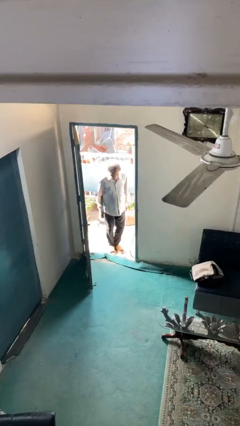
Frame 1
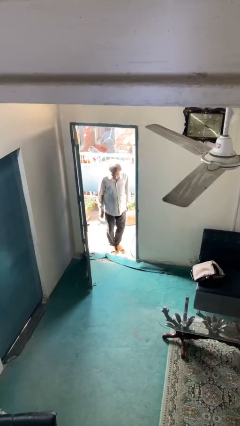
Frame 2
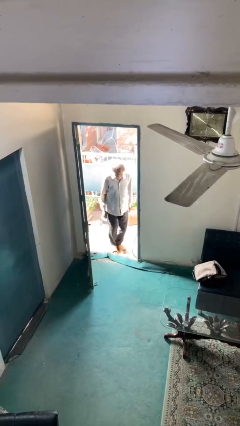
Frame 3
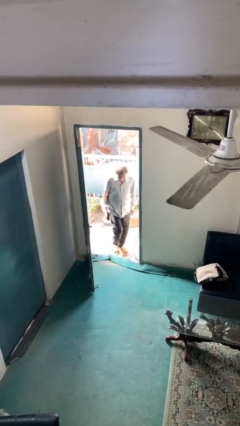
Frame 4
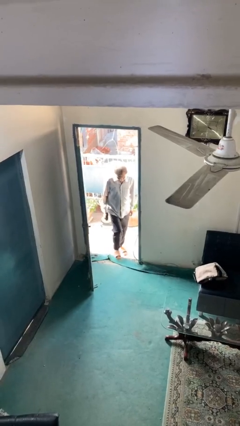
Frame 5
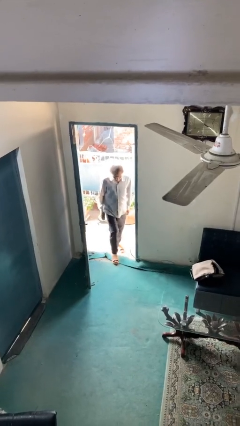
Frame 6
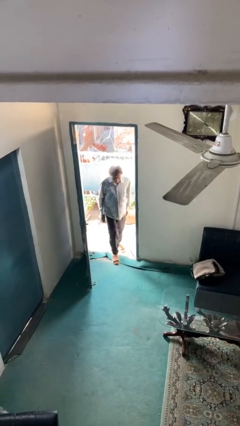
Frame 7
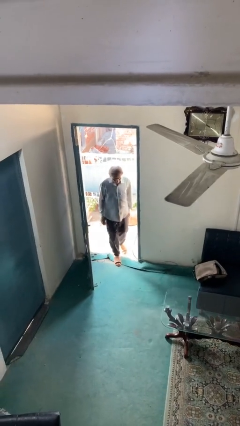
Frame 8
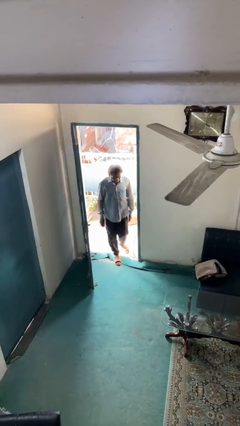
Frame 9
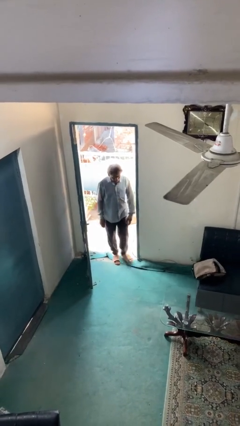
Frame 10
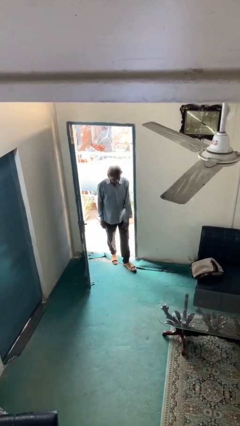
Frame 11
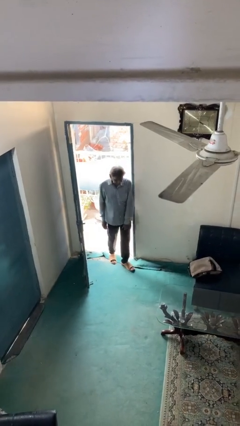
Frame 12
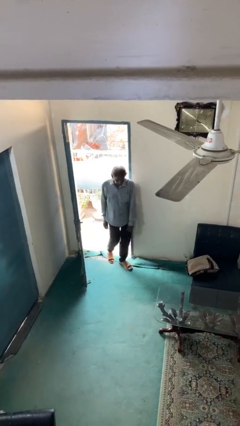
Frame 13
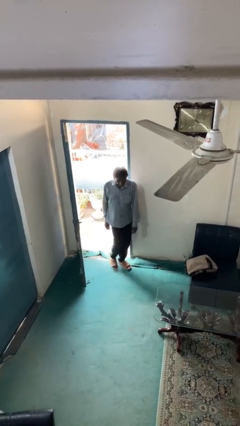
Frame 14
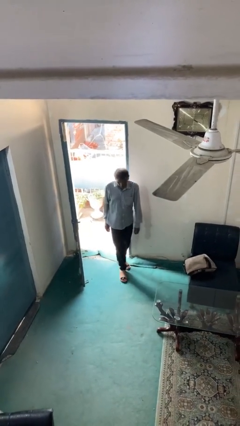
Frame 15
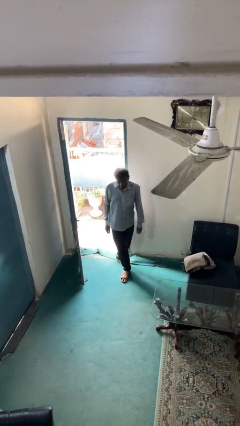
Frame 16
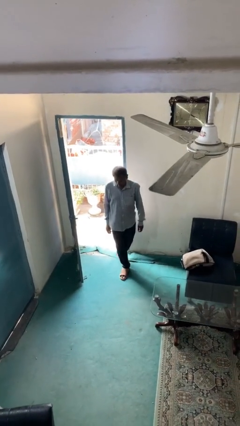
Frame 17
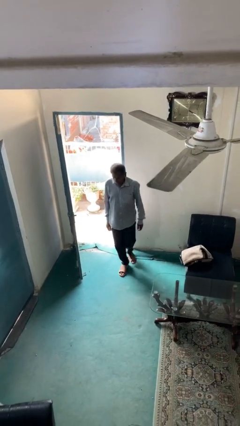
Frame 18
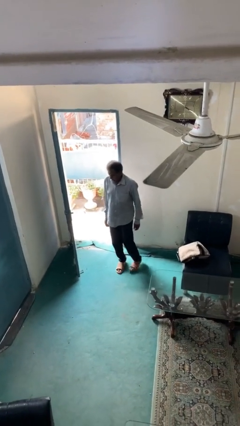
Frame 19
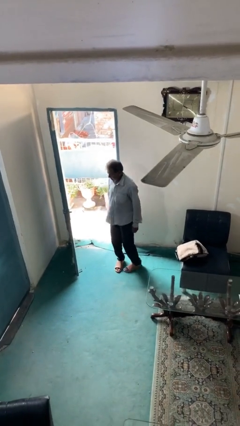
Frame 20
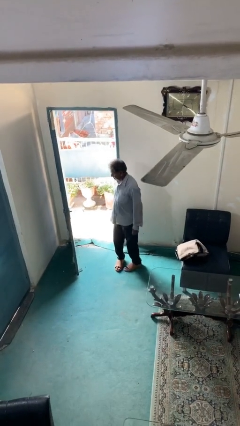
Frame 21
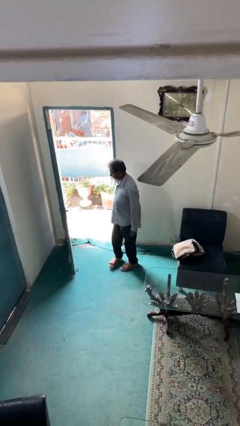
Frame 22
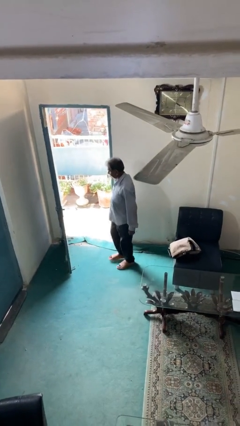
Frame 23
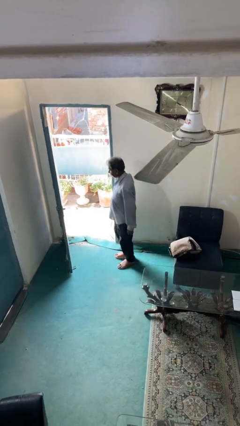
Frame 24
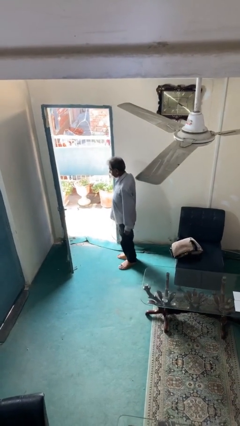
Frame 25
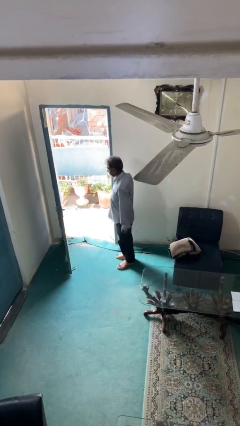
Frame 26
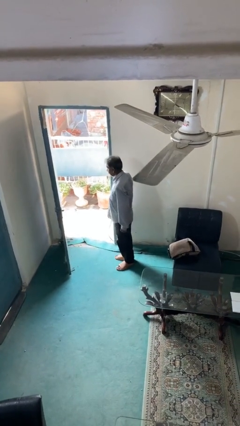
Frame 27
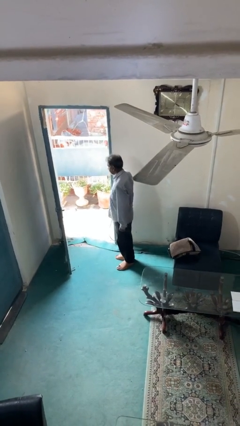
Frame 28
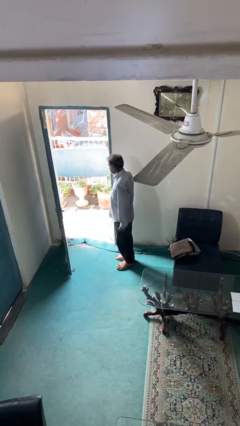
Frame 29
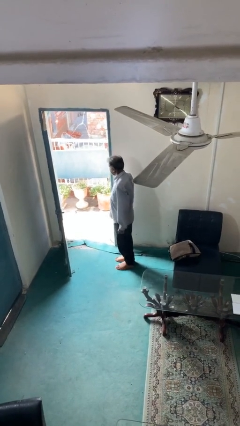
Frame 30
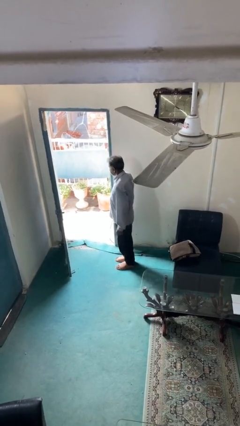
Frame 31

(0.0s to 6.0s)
person enters scene through structure

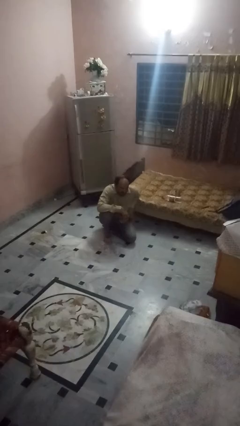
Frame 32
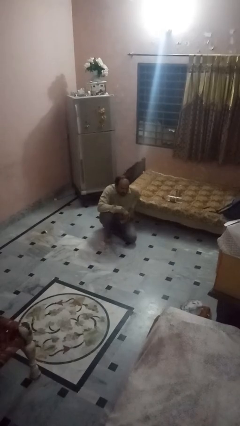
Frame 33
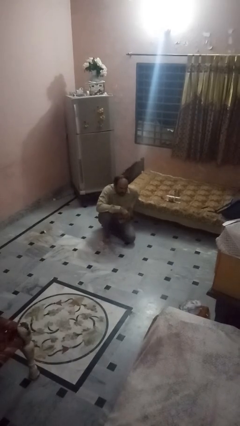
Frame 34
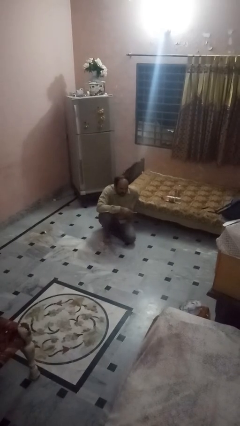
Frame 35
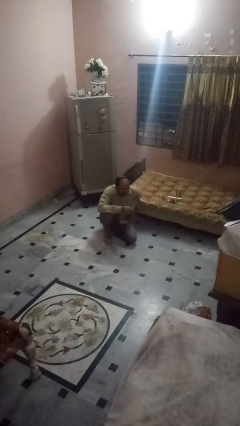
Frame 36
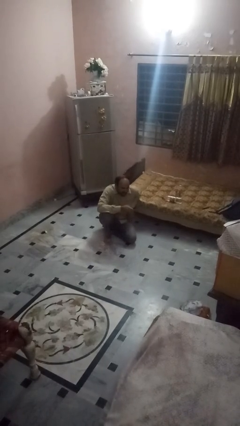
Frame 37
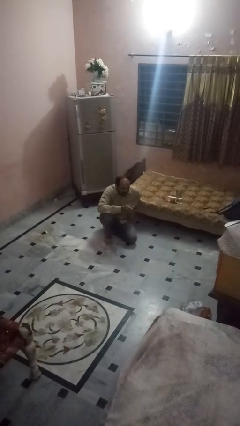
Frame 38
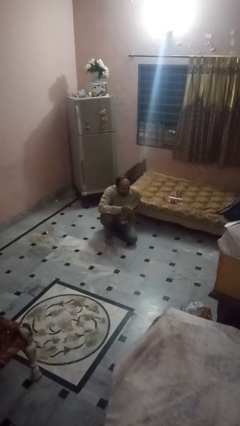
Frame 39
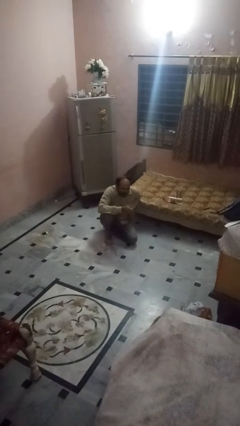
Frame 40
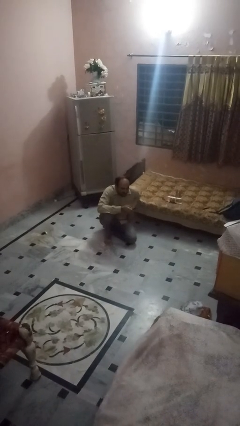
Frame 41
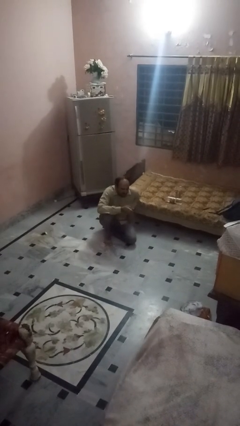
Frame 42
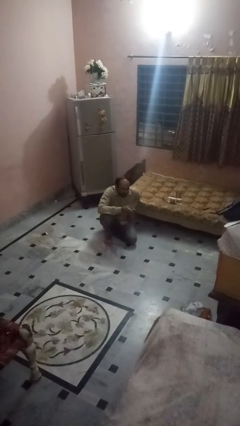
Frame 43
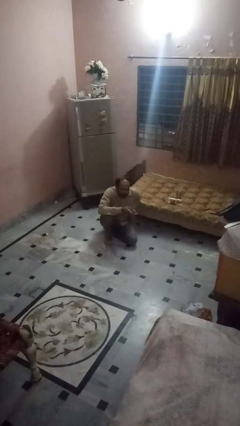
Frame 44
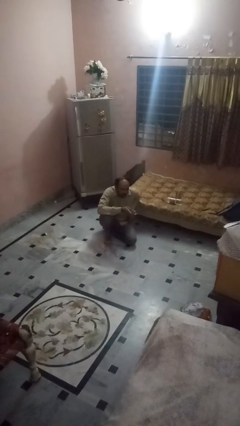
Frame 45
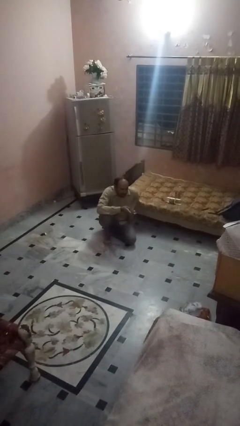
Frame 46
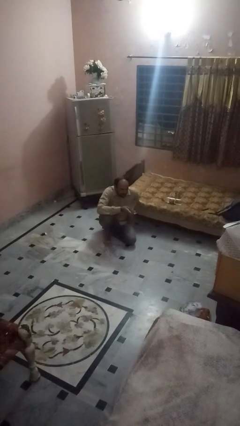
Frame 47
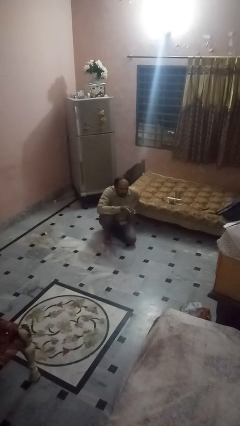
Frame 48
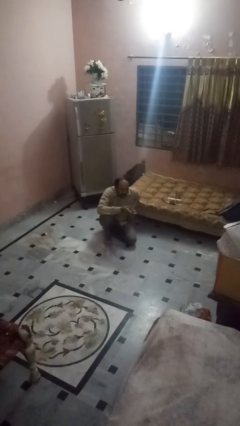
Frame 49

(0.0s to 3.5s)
person uses television remote

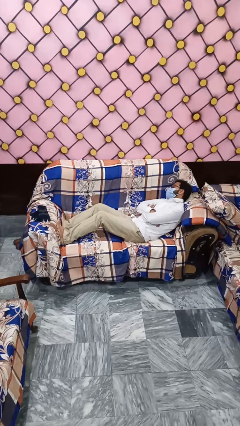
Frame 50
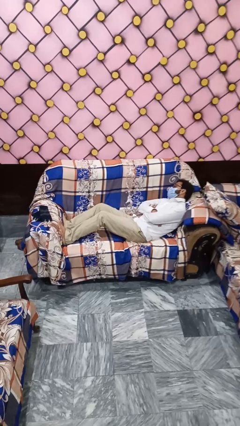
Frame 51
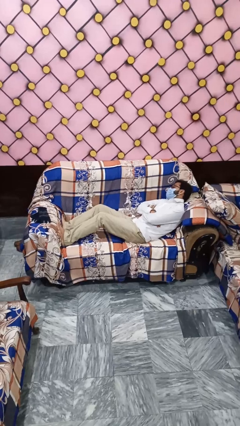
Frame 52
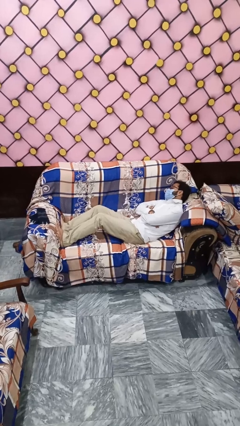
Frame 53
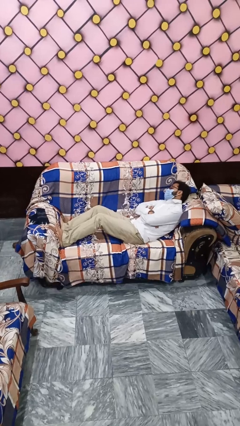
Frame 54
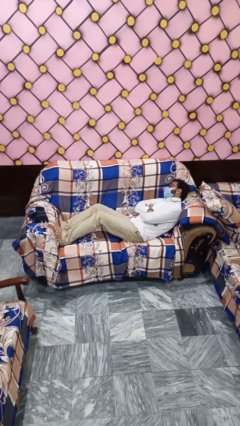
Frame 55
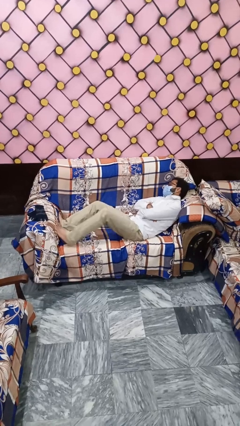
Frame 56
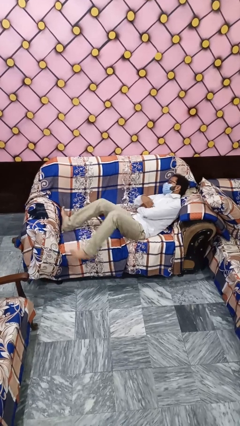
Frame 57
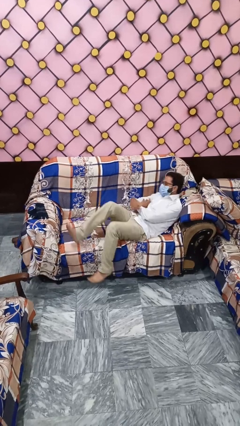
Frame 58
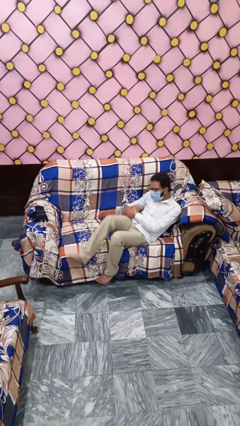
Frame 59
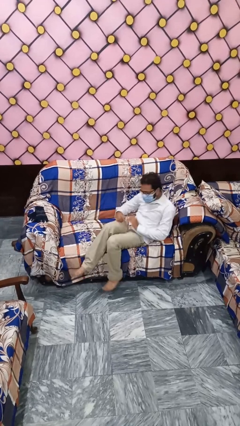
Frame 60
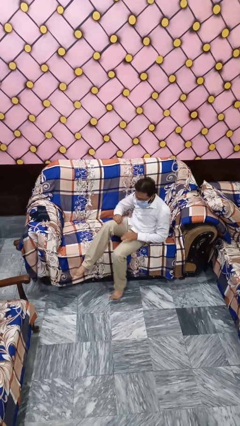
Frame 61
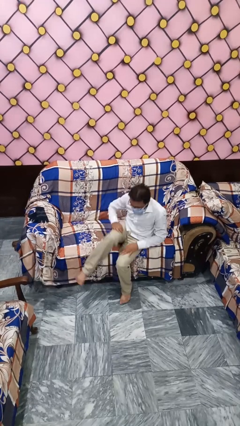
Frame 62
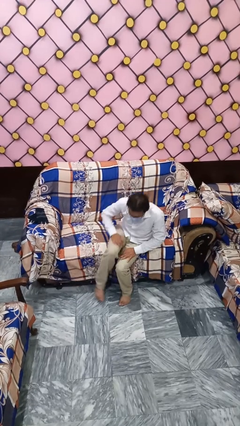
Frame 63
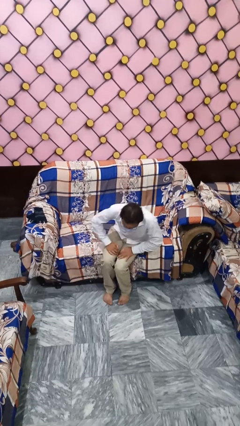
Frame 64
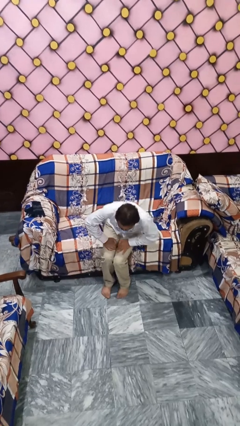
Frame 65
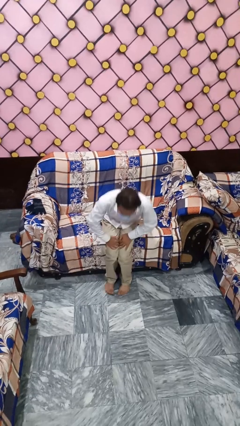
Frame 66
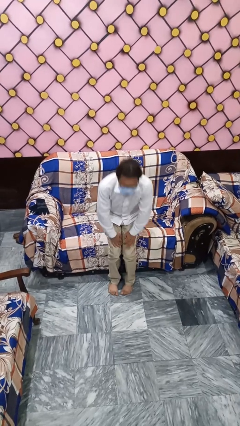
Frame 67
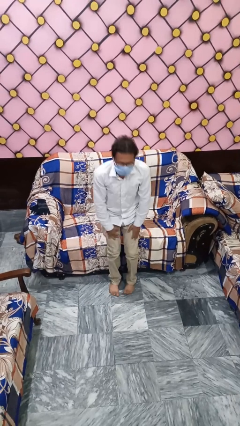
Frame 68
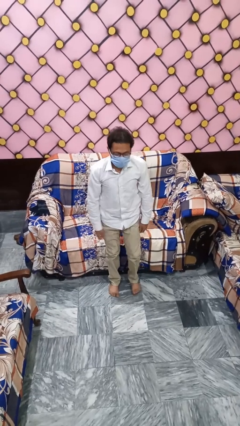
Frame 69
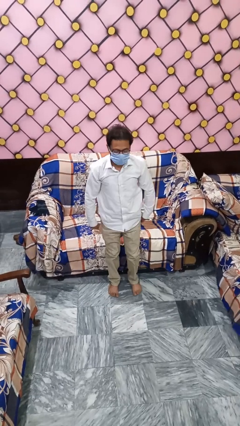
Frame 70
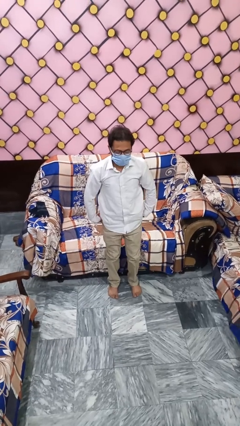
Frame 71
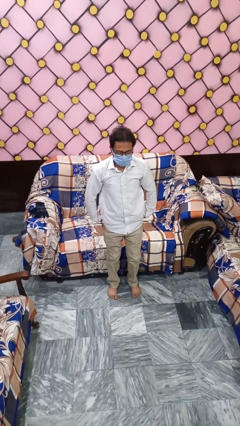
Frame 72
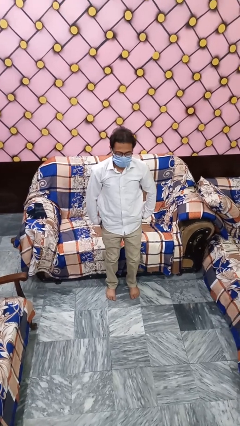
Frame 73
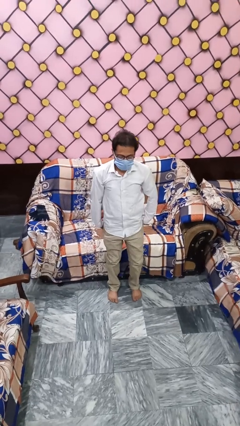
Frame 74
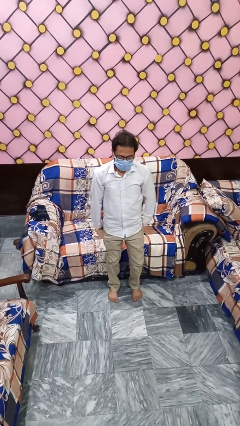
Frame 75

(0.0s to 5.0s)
person stands up

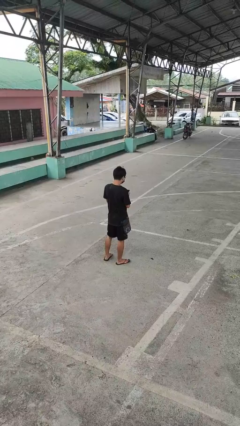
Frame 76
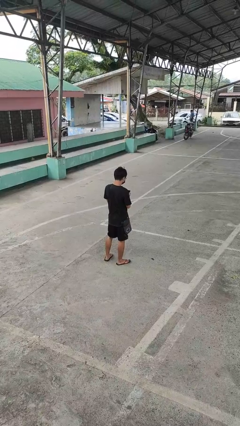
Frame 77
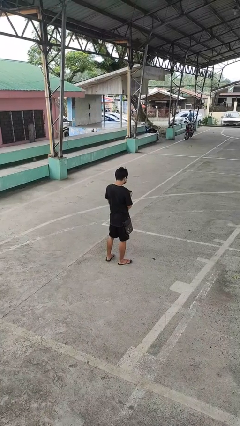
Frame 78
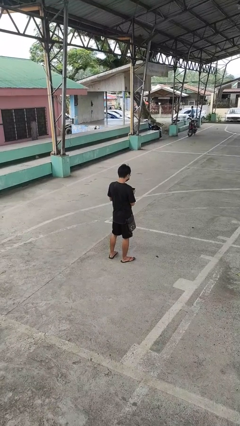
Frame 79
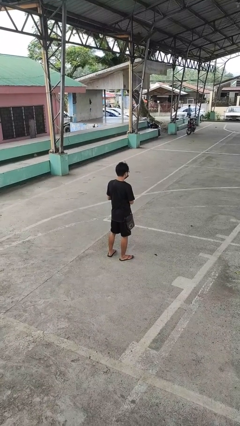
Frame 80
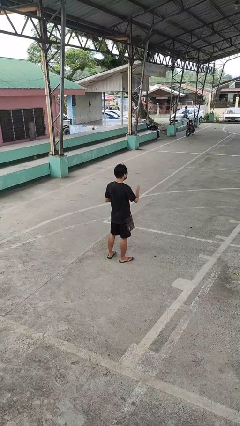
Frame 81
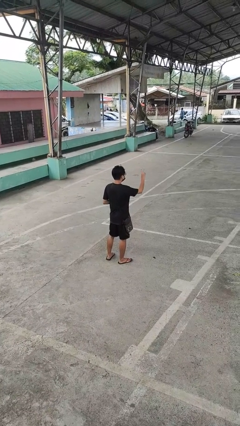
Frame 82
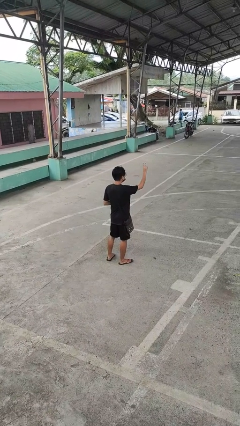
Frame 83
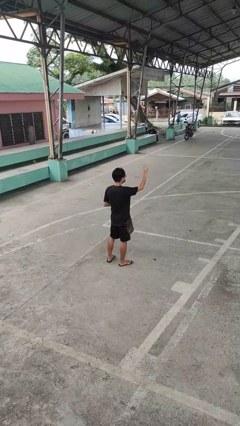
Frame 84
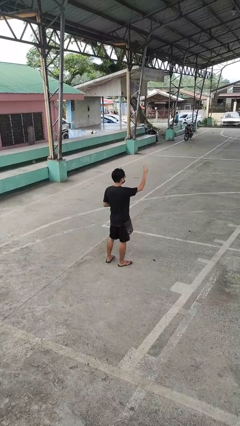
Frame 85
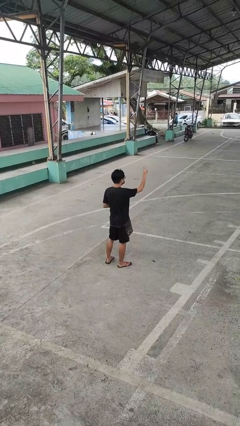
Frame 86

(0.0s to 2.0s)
person gestures peace

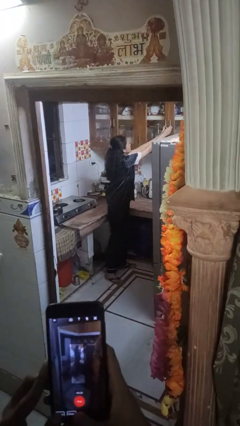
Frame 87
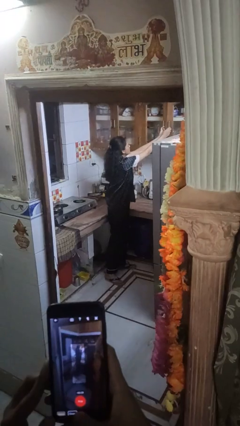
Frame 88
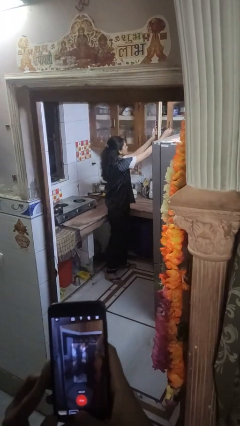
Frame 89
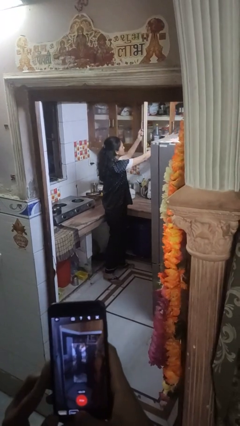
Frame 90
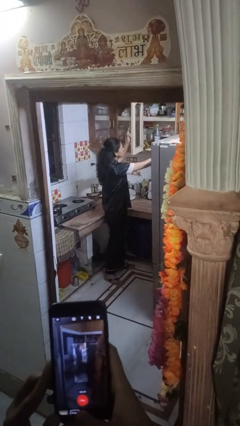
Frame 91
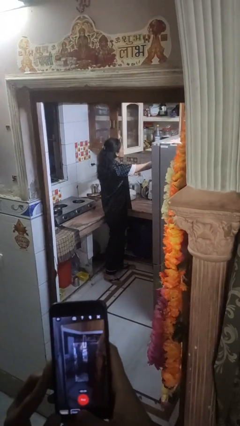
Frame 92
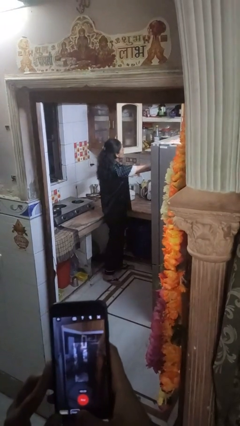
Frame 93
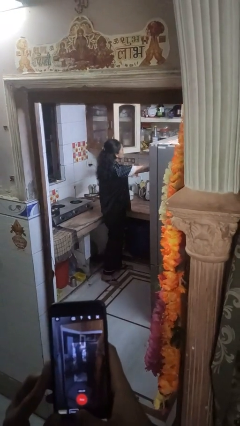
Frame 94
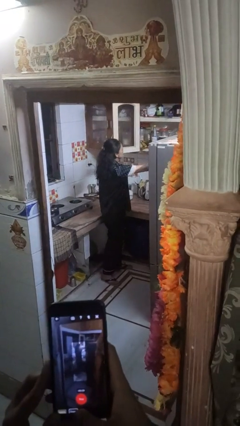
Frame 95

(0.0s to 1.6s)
person opens cabinet
